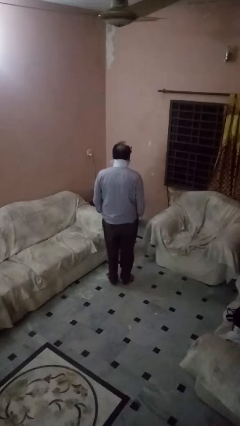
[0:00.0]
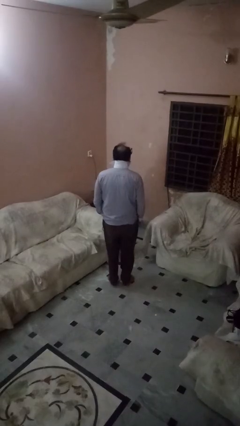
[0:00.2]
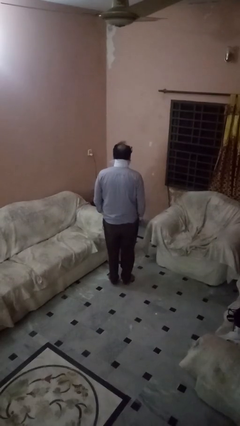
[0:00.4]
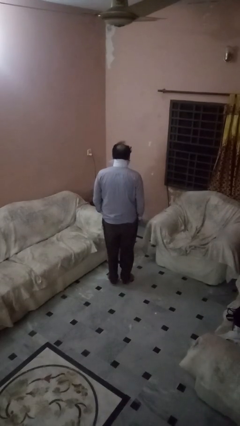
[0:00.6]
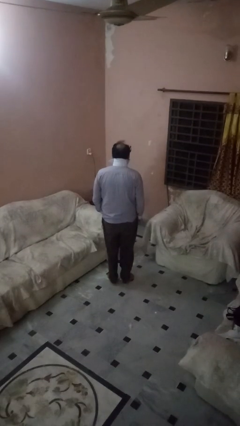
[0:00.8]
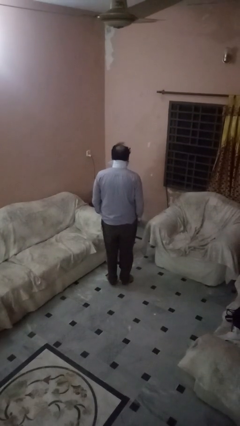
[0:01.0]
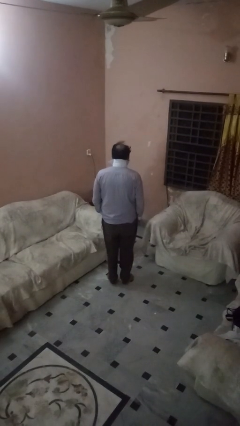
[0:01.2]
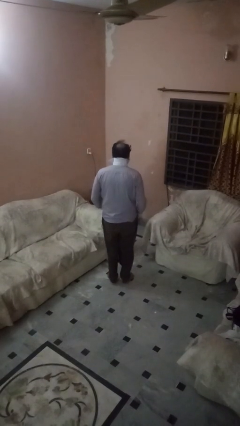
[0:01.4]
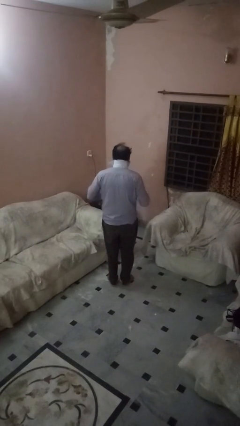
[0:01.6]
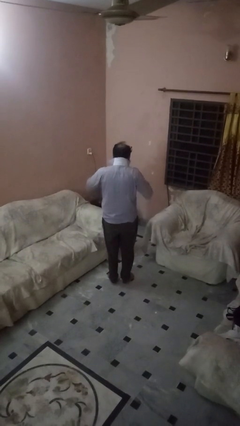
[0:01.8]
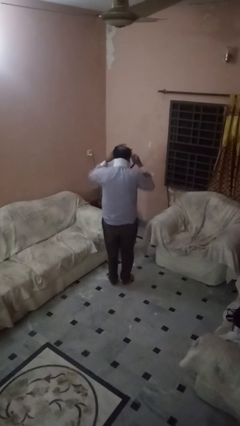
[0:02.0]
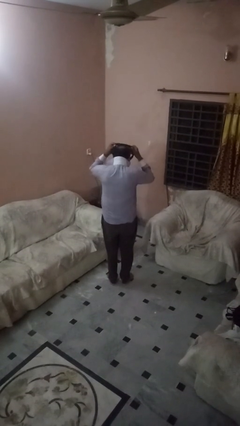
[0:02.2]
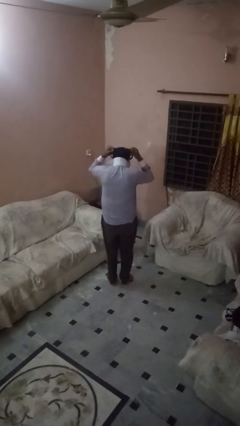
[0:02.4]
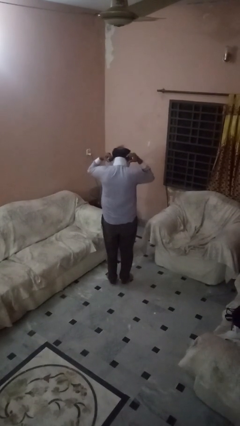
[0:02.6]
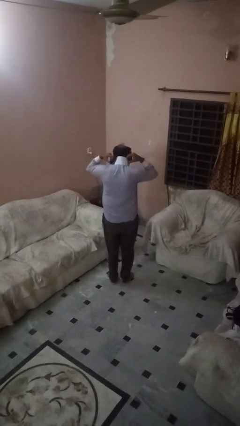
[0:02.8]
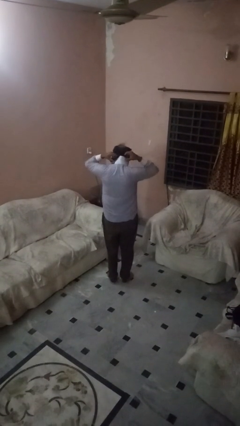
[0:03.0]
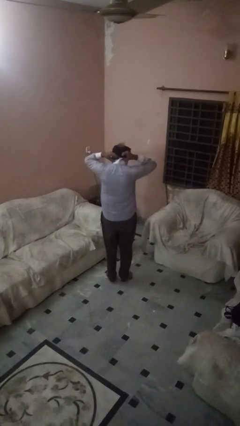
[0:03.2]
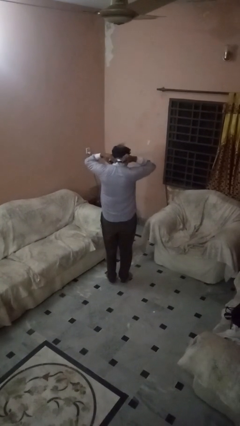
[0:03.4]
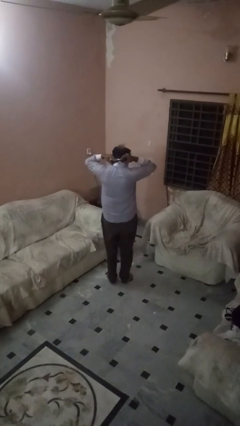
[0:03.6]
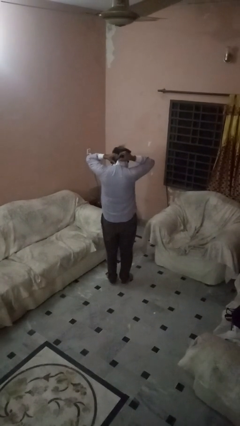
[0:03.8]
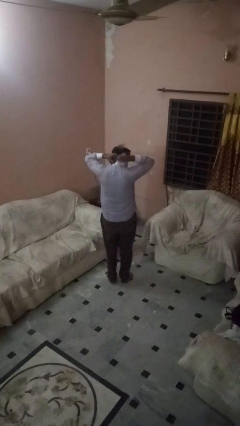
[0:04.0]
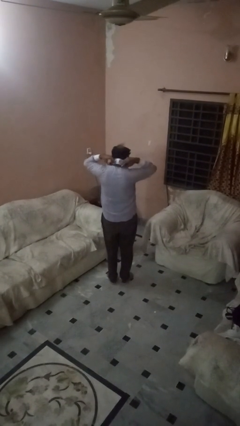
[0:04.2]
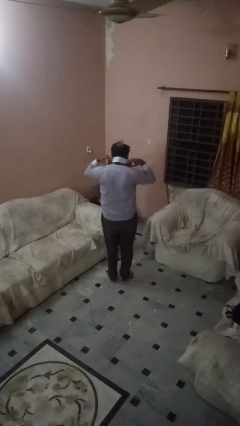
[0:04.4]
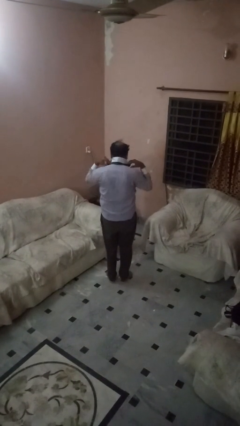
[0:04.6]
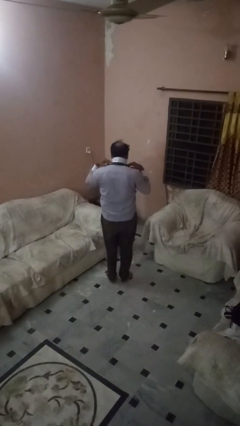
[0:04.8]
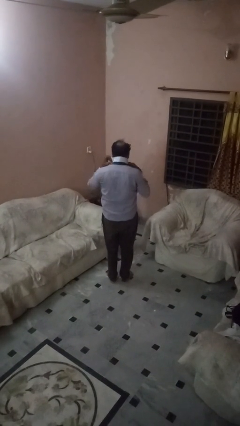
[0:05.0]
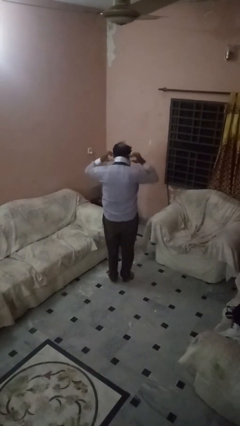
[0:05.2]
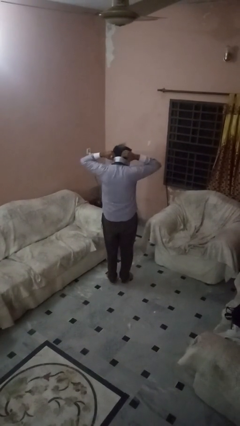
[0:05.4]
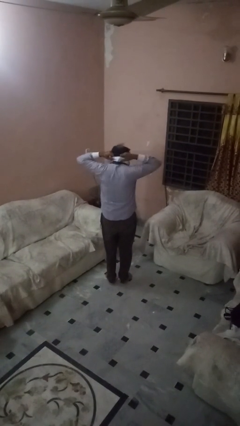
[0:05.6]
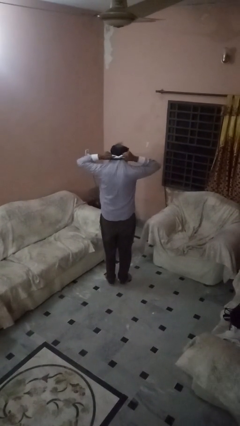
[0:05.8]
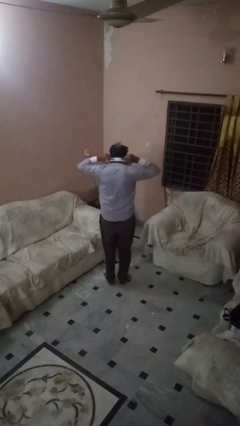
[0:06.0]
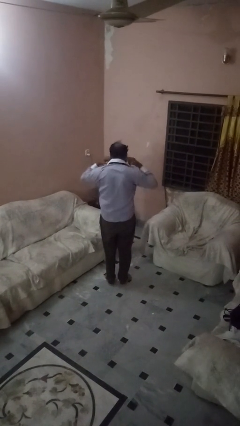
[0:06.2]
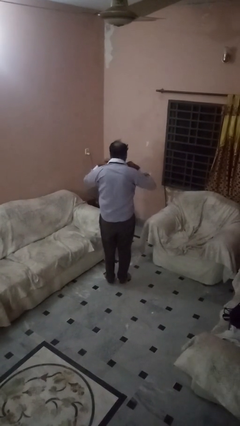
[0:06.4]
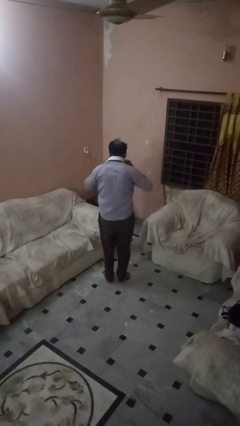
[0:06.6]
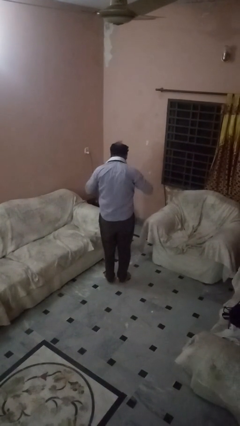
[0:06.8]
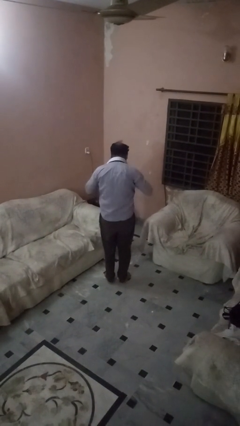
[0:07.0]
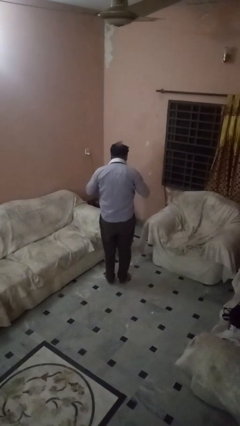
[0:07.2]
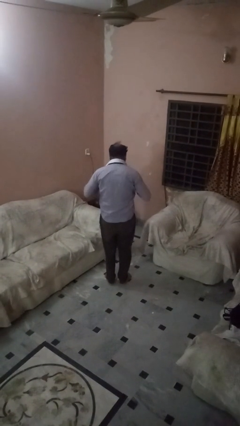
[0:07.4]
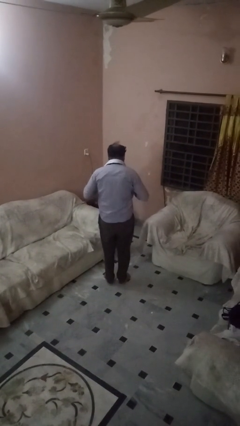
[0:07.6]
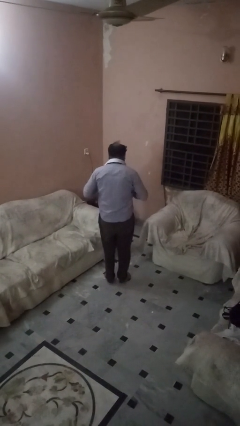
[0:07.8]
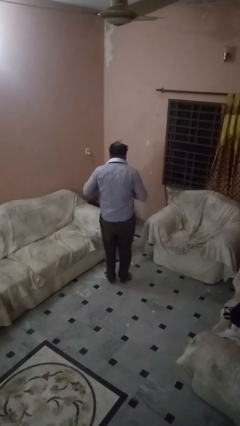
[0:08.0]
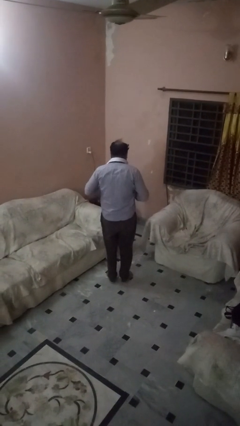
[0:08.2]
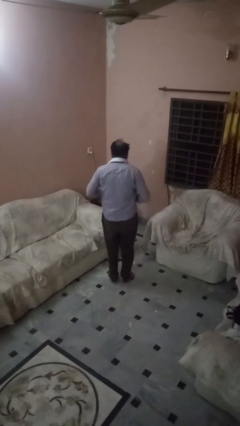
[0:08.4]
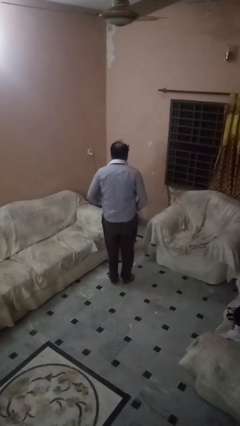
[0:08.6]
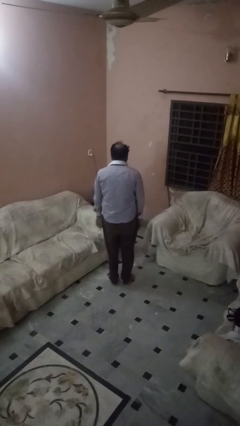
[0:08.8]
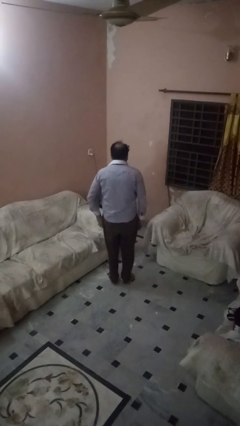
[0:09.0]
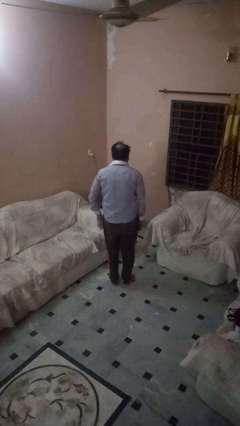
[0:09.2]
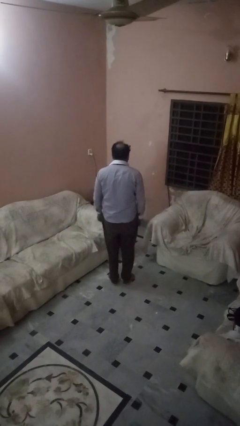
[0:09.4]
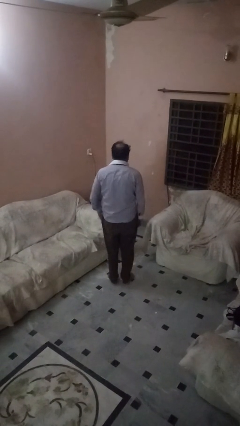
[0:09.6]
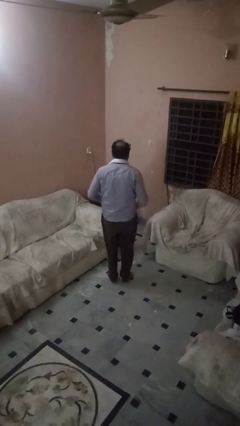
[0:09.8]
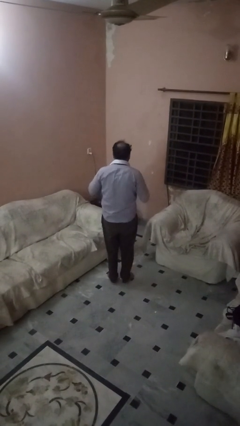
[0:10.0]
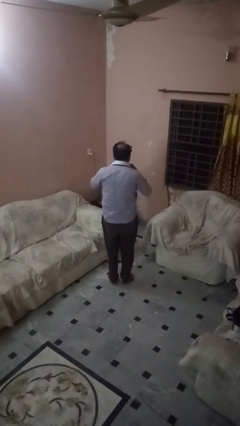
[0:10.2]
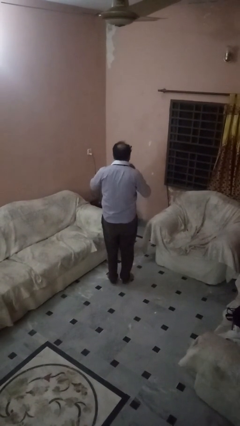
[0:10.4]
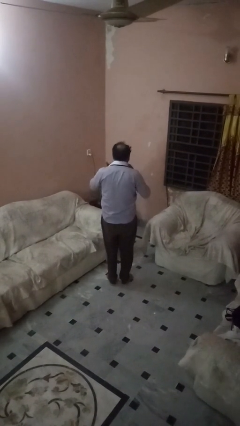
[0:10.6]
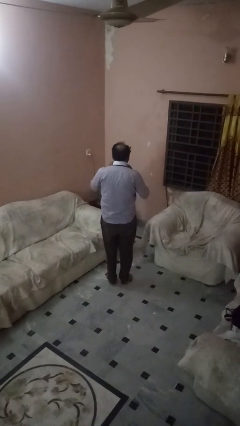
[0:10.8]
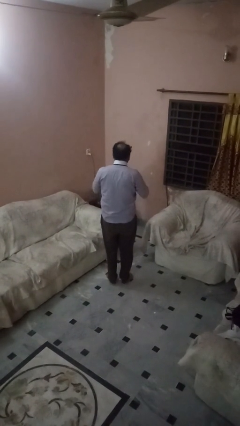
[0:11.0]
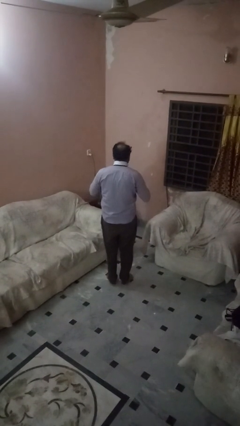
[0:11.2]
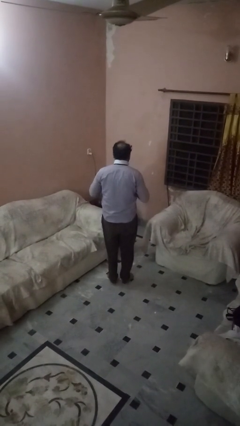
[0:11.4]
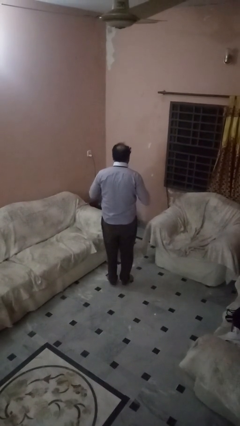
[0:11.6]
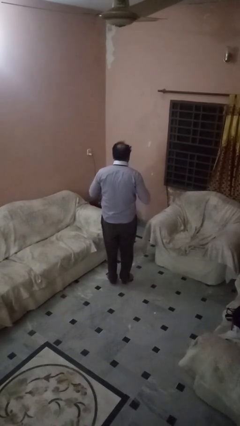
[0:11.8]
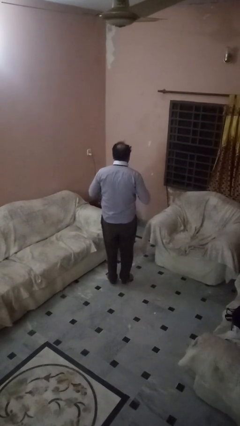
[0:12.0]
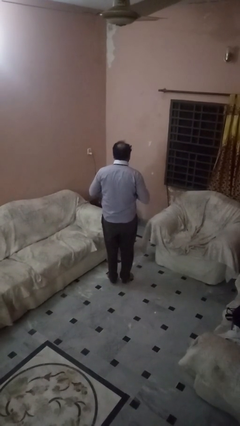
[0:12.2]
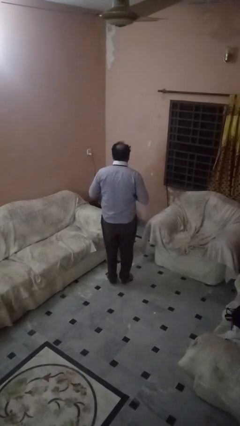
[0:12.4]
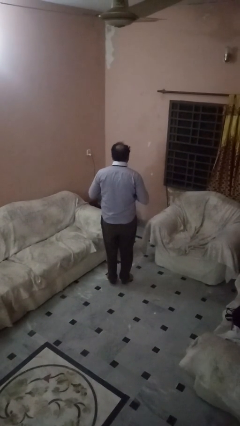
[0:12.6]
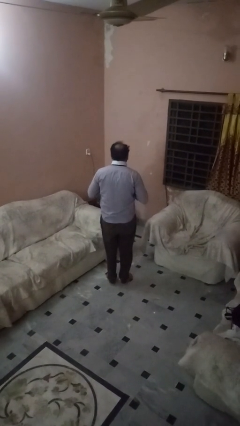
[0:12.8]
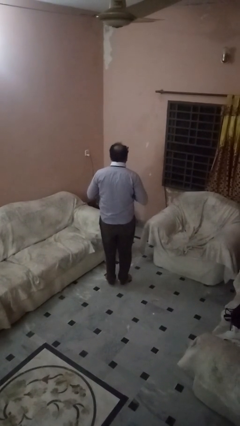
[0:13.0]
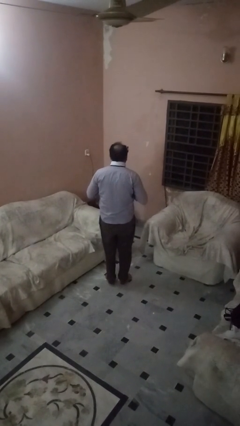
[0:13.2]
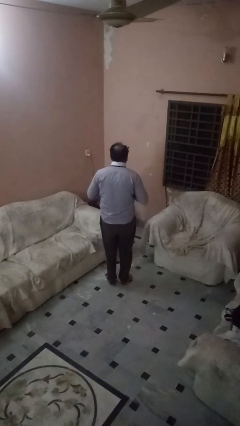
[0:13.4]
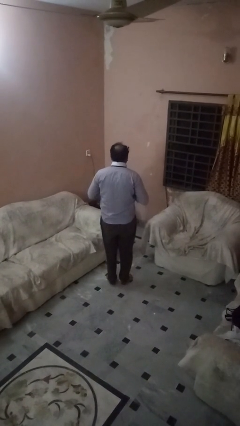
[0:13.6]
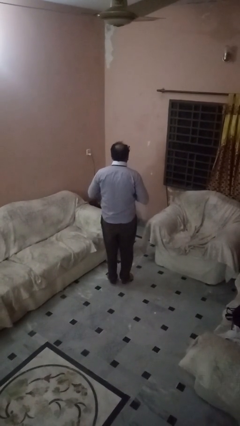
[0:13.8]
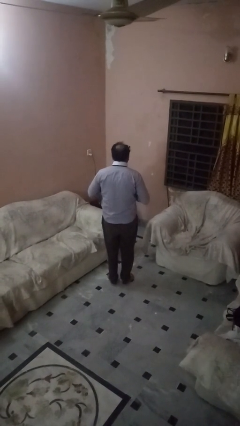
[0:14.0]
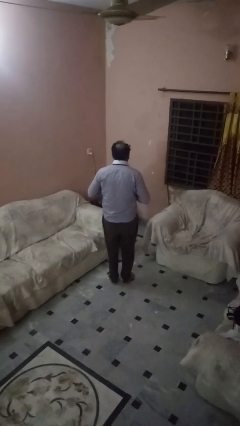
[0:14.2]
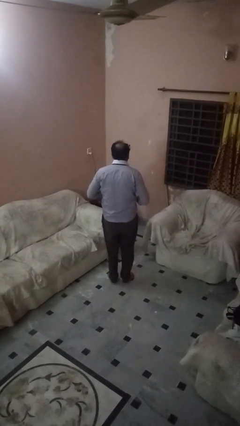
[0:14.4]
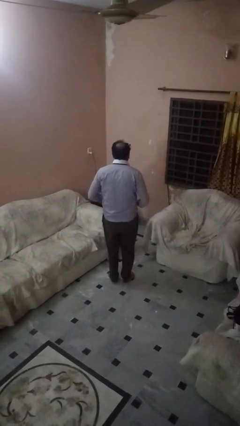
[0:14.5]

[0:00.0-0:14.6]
person puts on necktie
